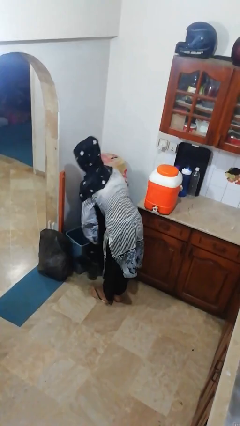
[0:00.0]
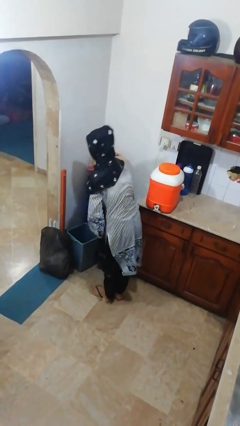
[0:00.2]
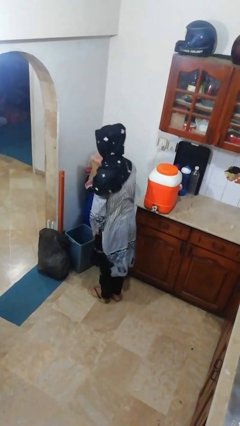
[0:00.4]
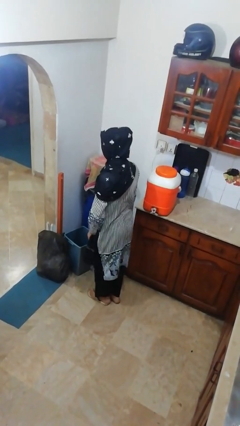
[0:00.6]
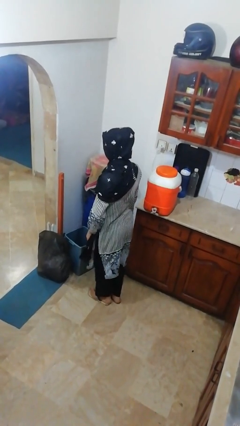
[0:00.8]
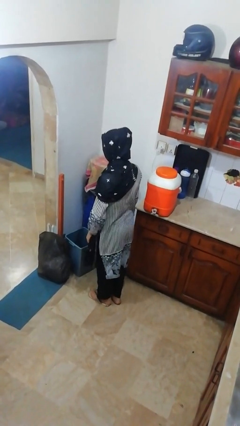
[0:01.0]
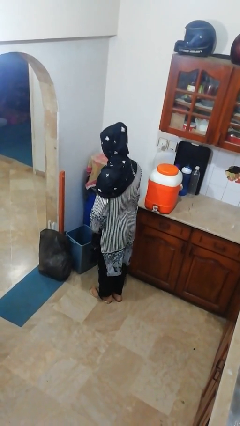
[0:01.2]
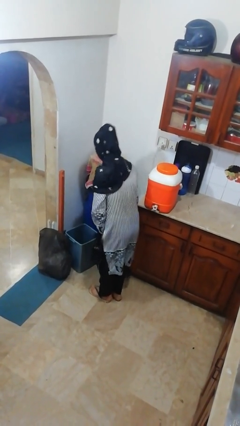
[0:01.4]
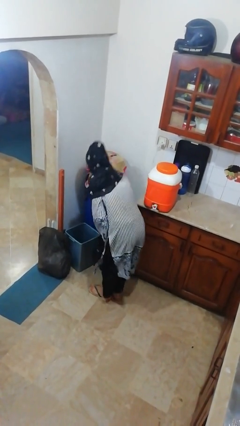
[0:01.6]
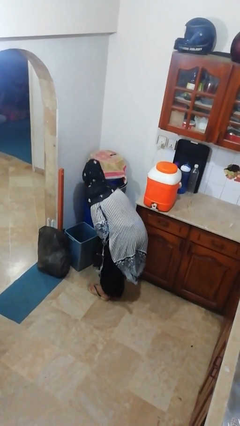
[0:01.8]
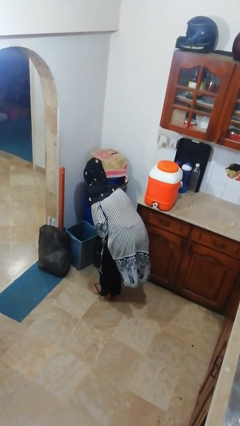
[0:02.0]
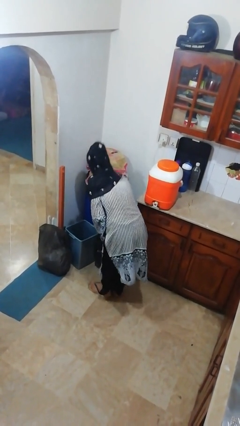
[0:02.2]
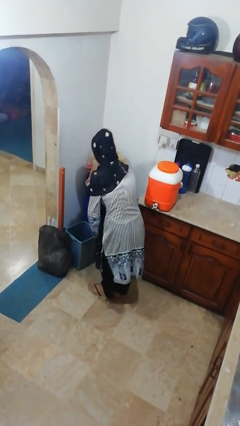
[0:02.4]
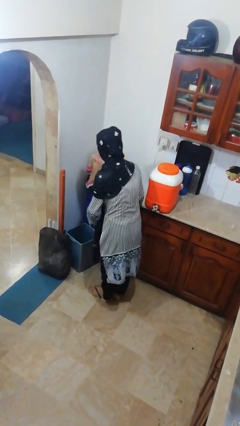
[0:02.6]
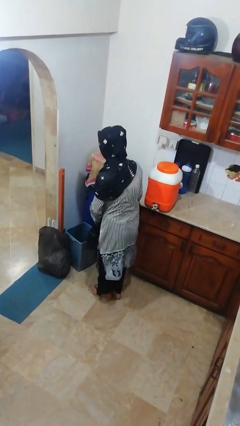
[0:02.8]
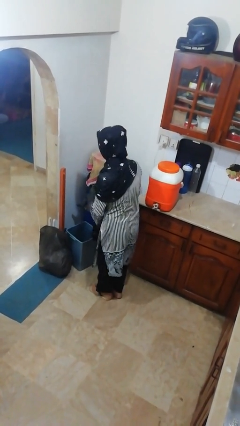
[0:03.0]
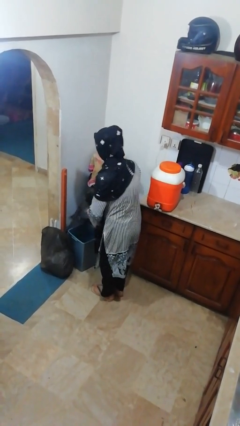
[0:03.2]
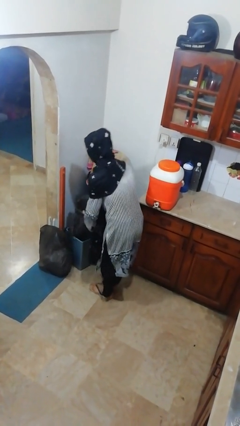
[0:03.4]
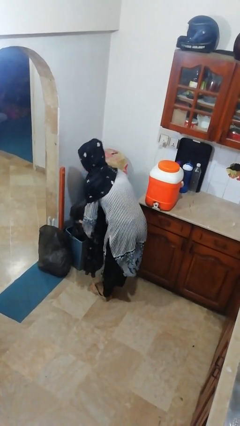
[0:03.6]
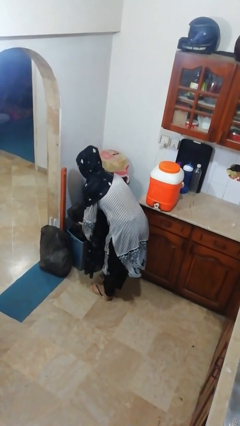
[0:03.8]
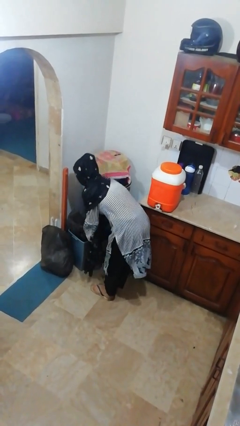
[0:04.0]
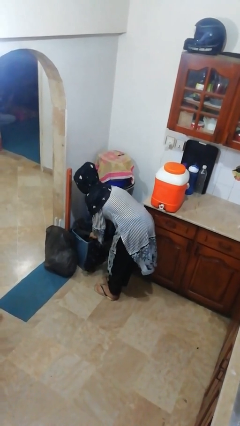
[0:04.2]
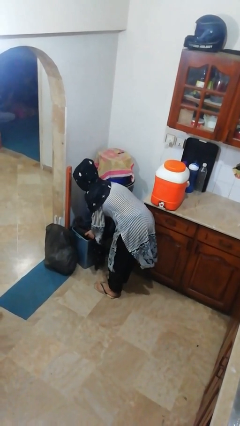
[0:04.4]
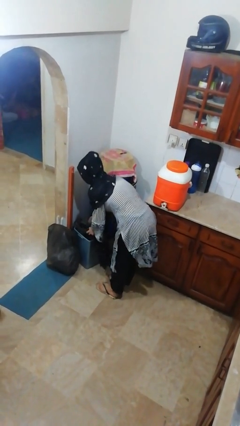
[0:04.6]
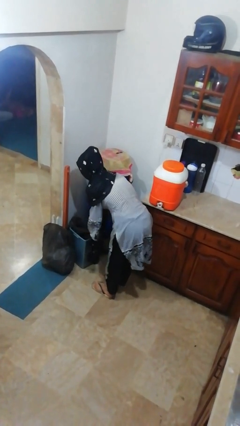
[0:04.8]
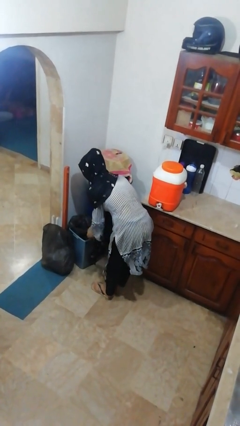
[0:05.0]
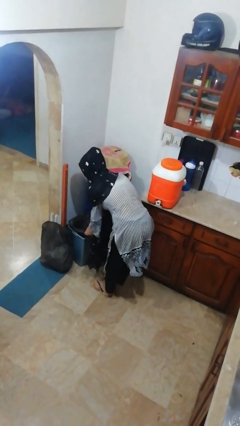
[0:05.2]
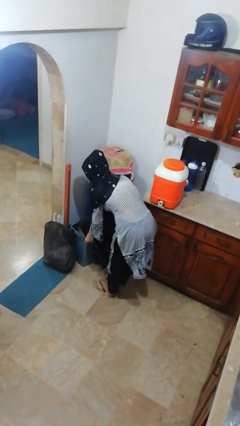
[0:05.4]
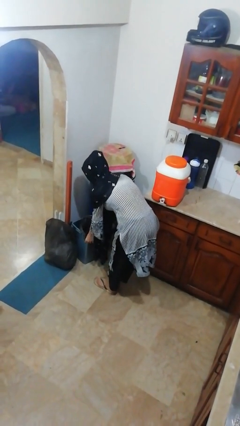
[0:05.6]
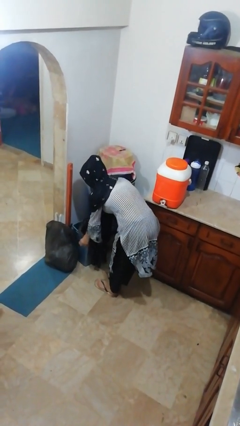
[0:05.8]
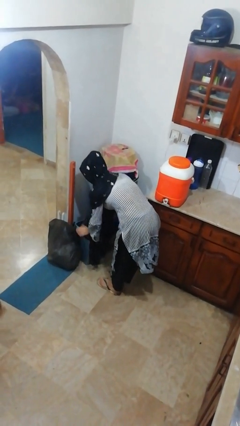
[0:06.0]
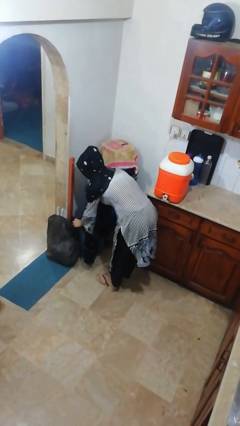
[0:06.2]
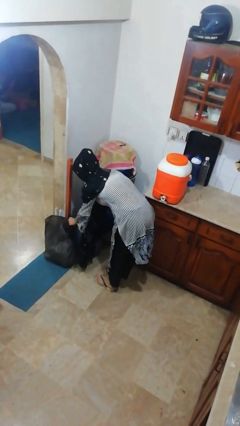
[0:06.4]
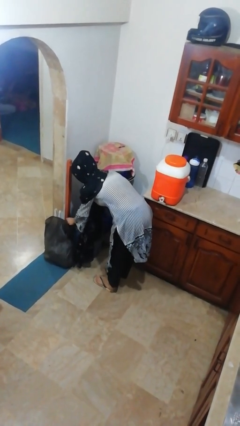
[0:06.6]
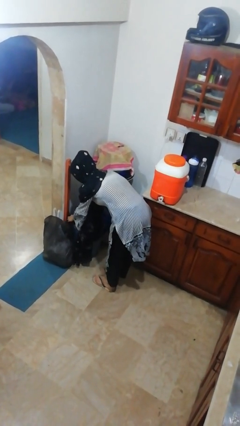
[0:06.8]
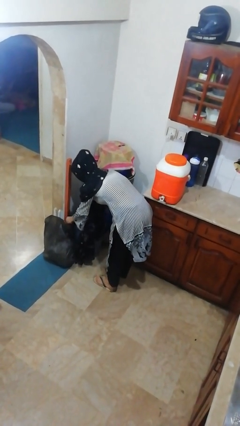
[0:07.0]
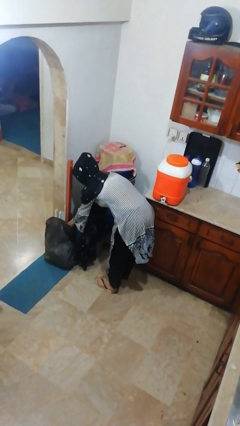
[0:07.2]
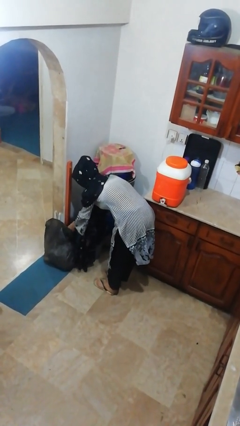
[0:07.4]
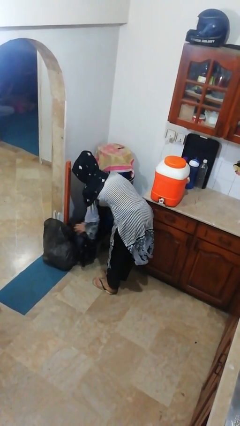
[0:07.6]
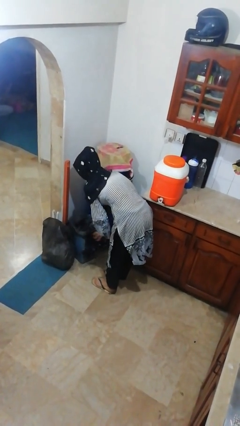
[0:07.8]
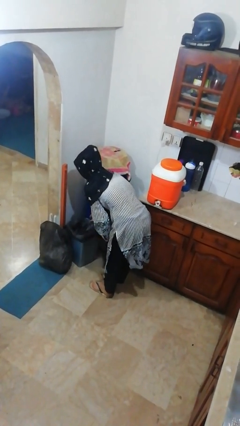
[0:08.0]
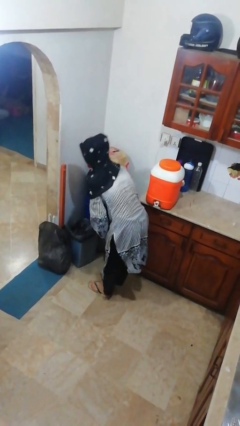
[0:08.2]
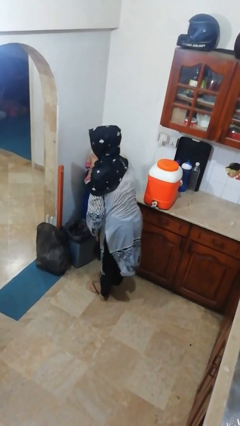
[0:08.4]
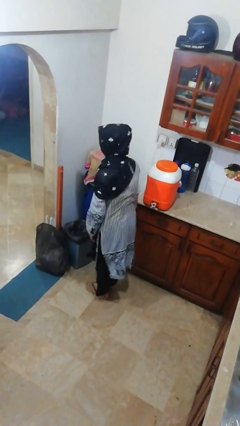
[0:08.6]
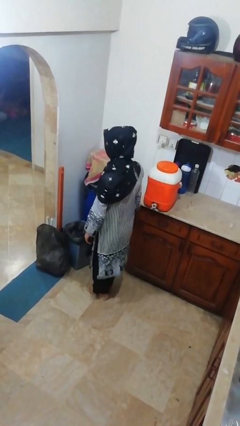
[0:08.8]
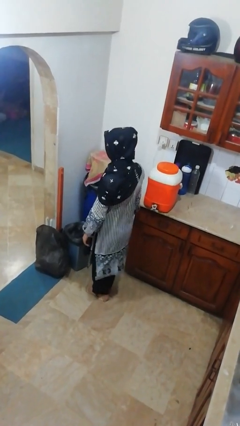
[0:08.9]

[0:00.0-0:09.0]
person inserts trashbag into trashcan

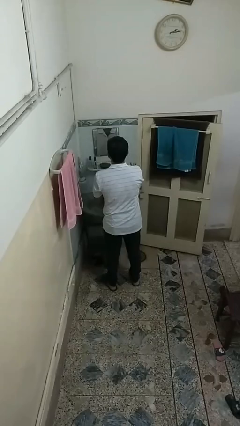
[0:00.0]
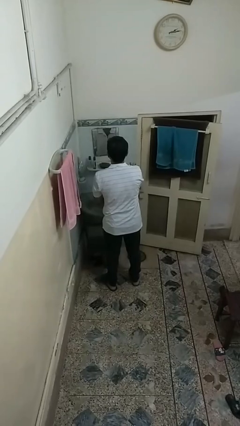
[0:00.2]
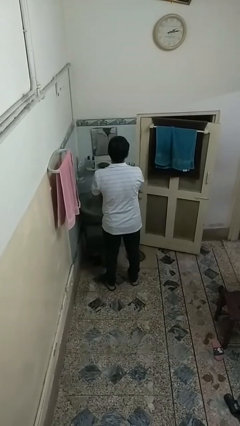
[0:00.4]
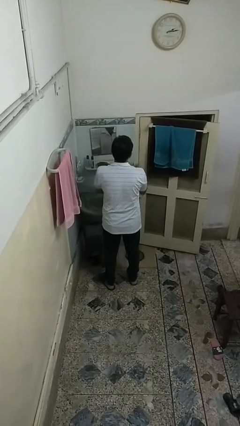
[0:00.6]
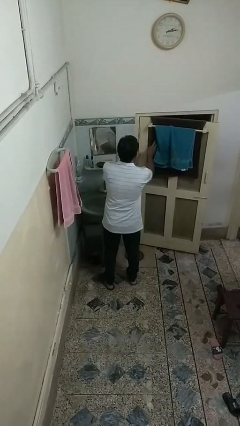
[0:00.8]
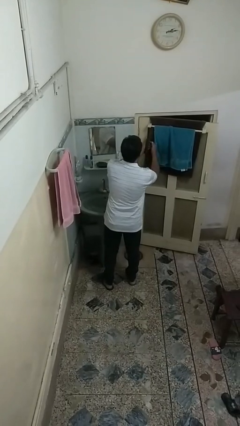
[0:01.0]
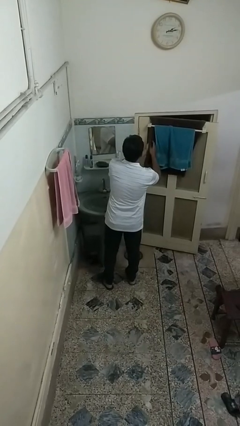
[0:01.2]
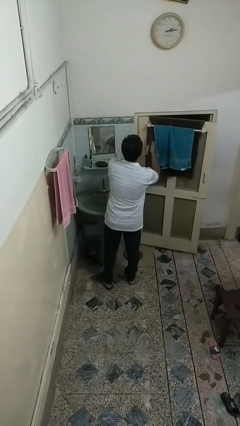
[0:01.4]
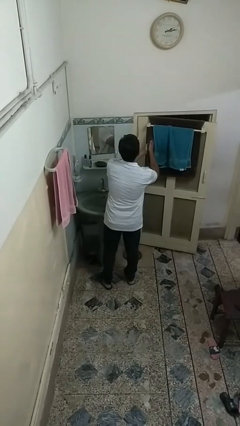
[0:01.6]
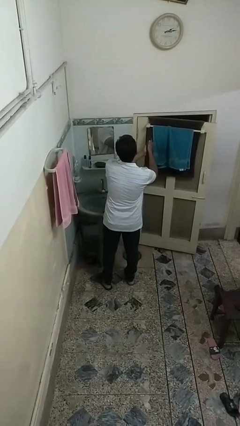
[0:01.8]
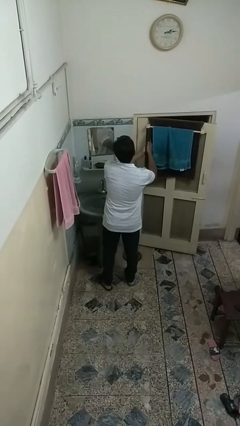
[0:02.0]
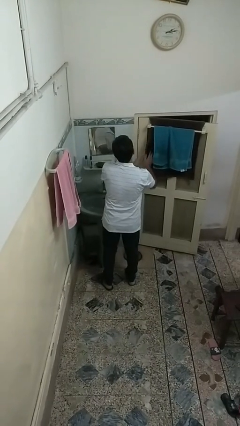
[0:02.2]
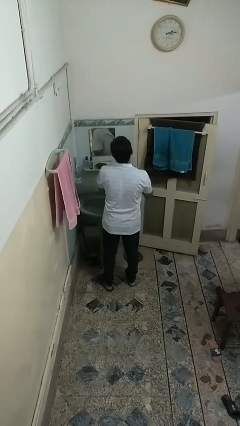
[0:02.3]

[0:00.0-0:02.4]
person dries hands with towel

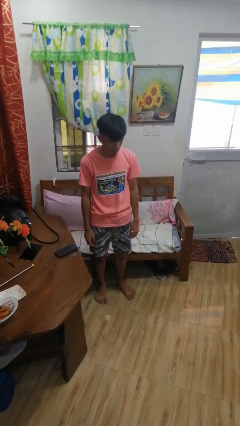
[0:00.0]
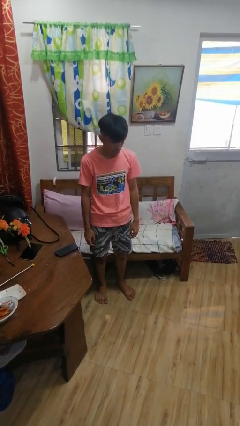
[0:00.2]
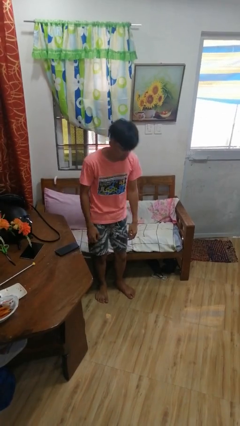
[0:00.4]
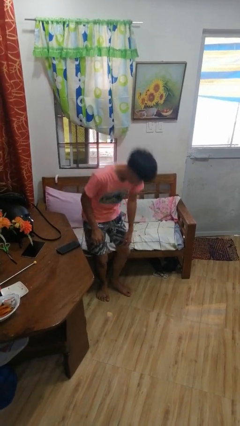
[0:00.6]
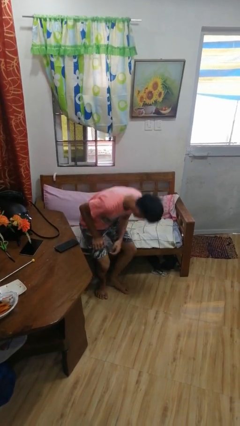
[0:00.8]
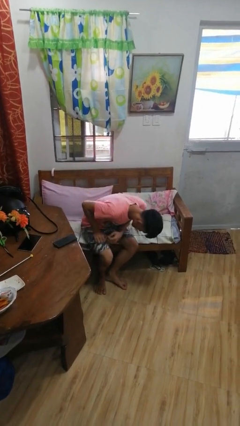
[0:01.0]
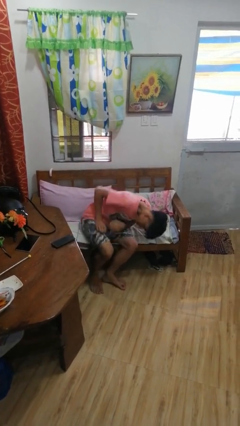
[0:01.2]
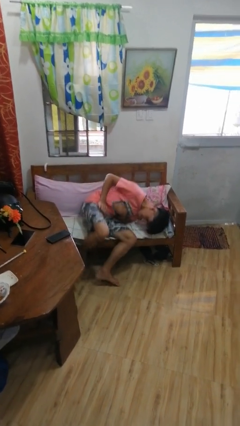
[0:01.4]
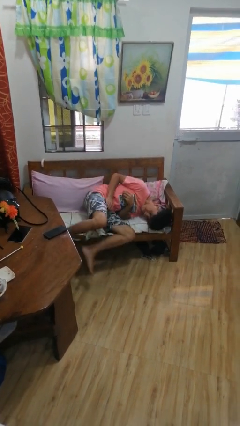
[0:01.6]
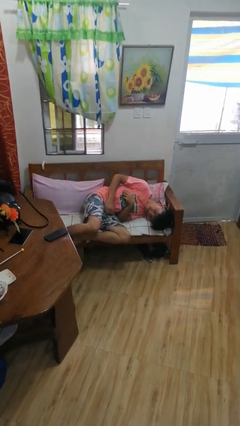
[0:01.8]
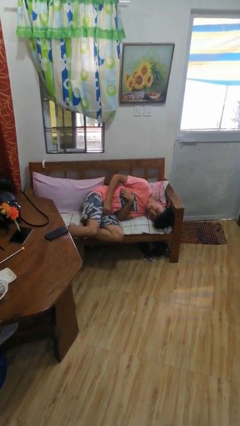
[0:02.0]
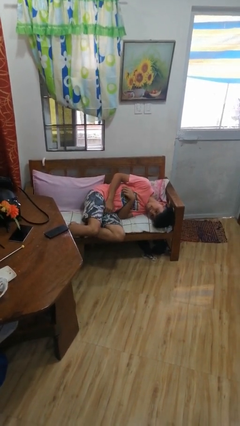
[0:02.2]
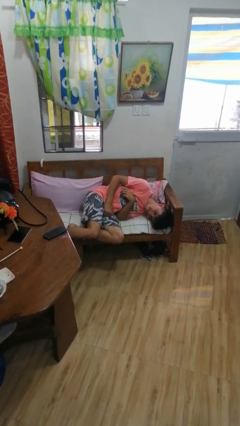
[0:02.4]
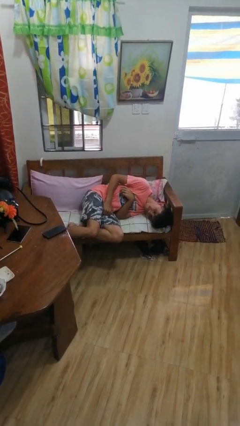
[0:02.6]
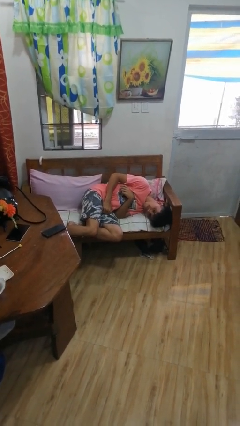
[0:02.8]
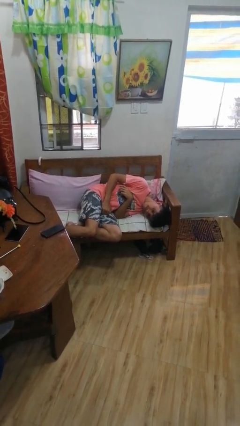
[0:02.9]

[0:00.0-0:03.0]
person lies down on couch

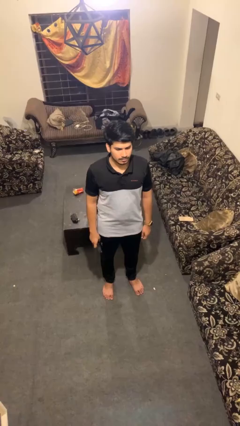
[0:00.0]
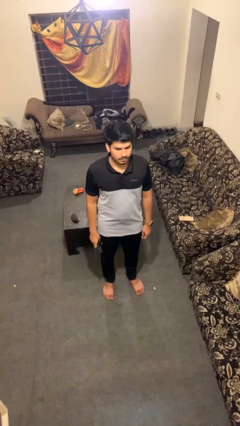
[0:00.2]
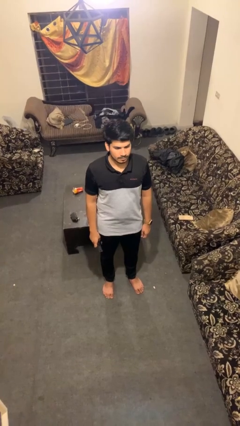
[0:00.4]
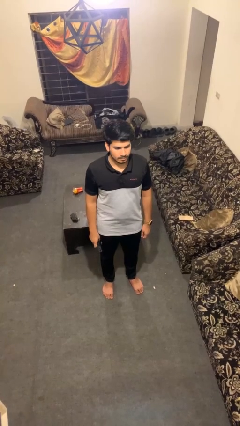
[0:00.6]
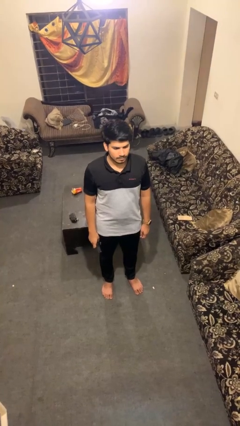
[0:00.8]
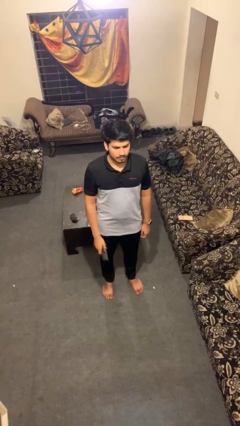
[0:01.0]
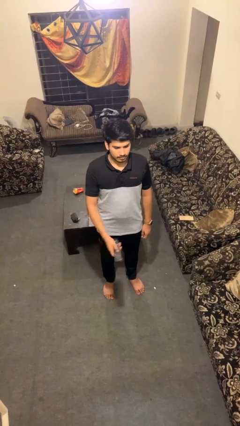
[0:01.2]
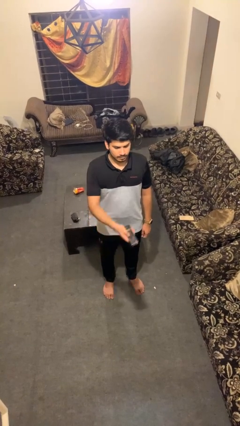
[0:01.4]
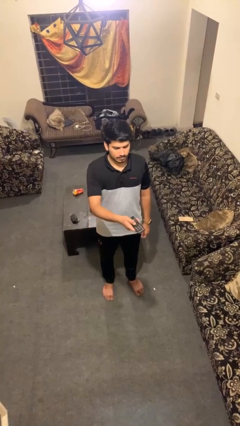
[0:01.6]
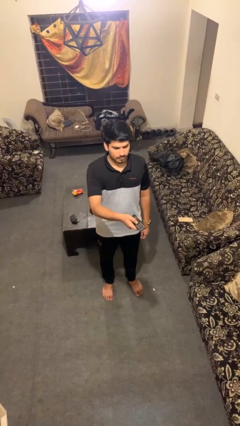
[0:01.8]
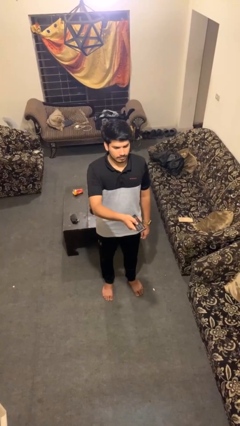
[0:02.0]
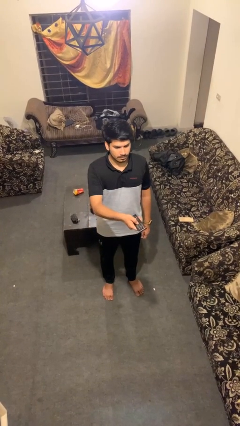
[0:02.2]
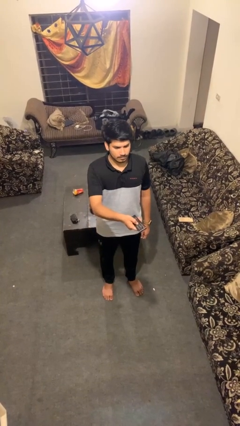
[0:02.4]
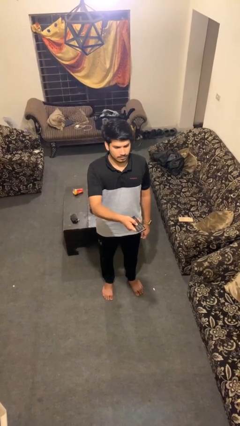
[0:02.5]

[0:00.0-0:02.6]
person uses television remote

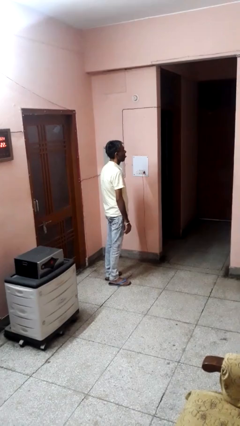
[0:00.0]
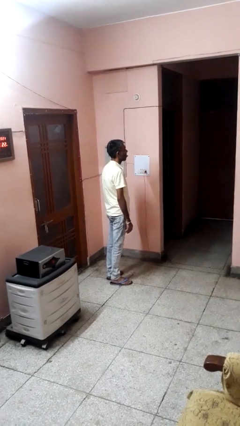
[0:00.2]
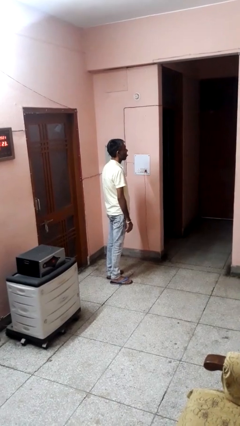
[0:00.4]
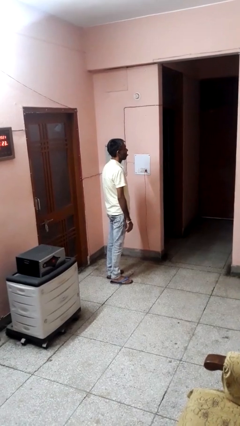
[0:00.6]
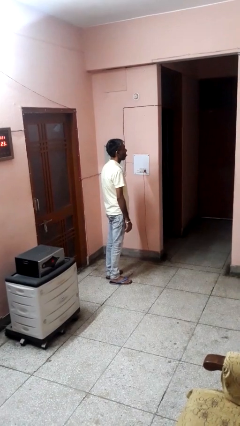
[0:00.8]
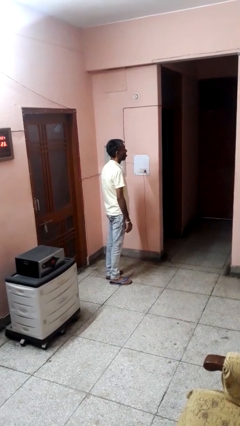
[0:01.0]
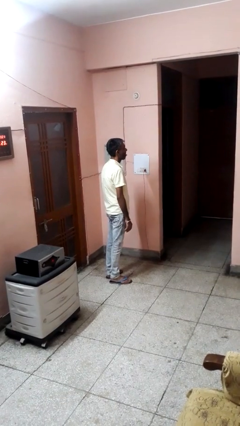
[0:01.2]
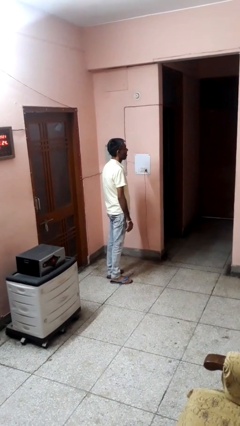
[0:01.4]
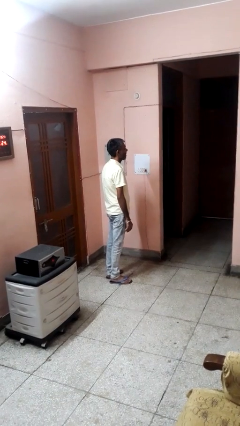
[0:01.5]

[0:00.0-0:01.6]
person sticks out tongue
